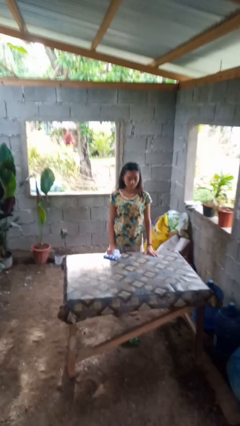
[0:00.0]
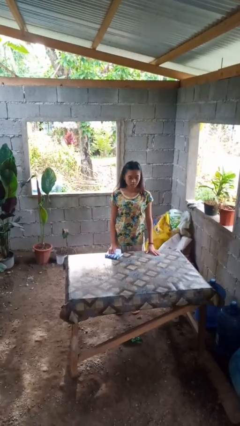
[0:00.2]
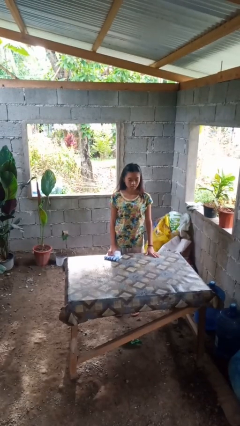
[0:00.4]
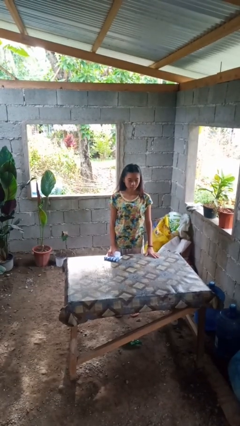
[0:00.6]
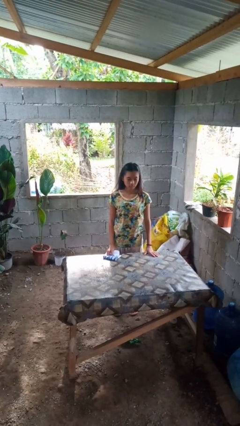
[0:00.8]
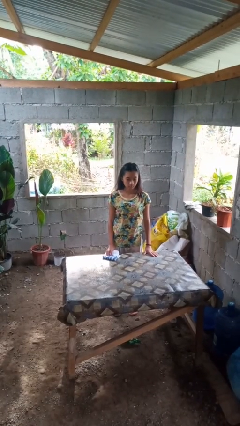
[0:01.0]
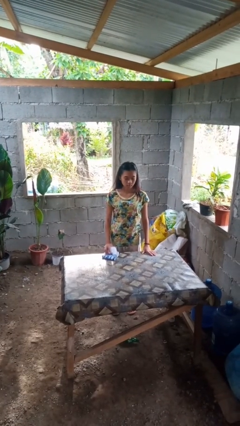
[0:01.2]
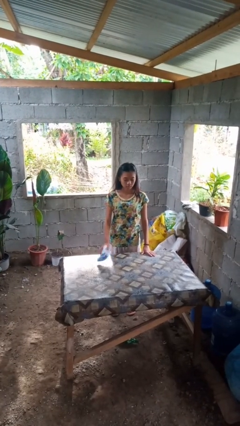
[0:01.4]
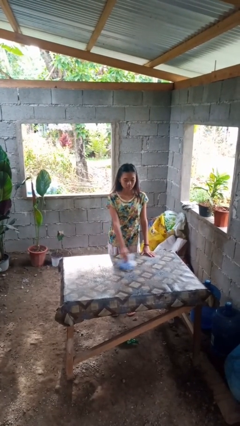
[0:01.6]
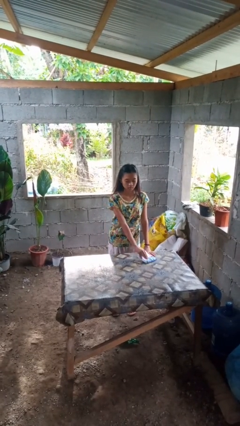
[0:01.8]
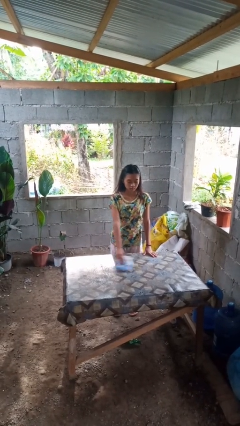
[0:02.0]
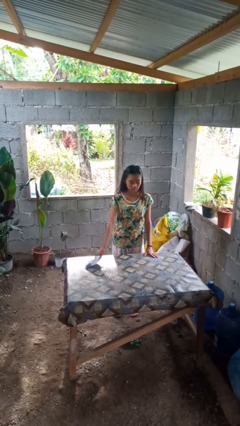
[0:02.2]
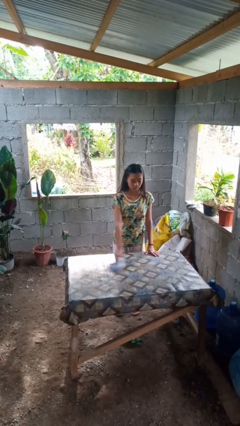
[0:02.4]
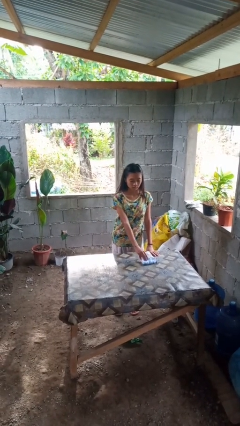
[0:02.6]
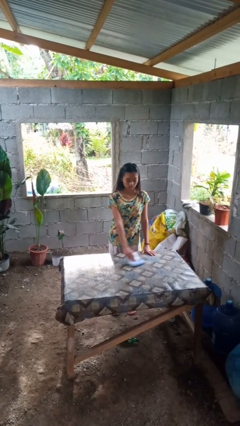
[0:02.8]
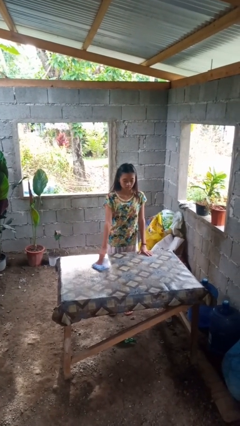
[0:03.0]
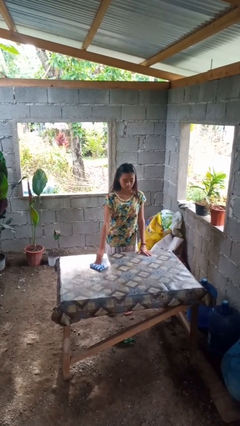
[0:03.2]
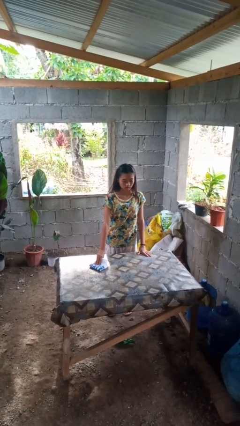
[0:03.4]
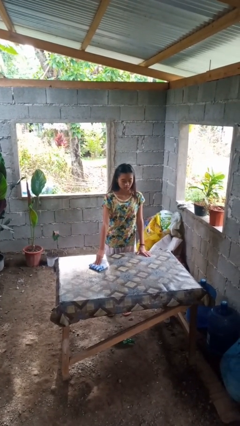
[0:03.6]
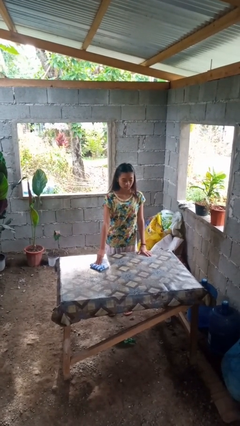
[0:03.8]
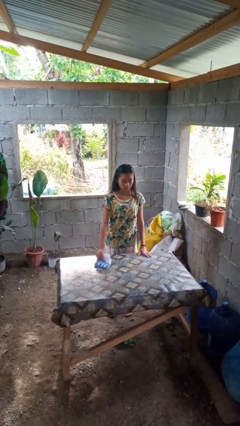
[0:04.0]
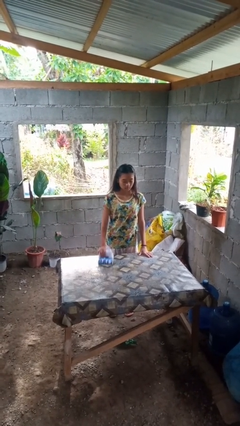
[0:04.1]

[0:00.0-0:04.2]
person cleans table with rag

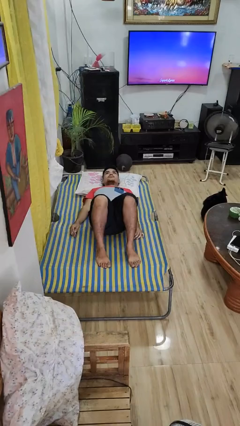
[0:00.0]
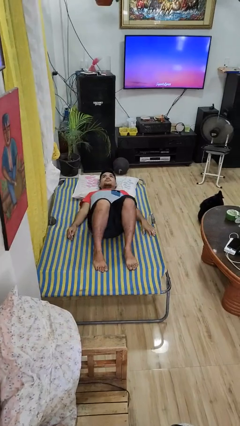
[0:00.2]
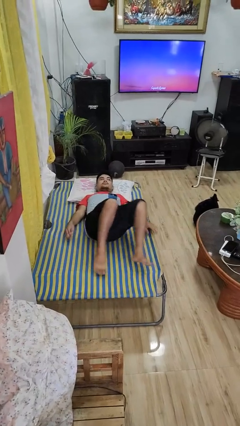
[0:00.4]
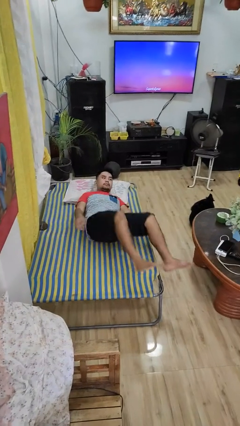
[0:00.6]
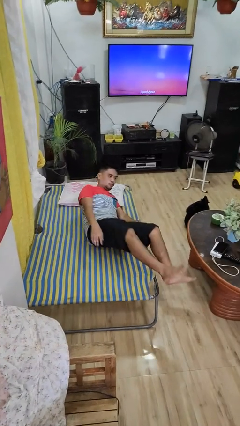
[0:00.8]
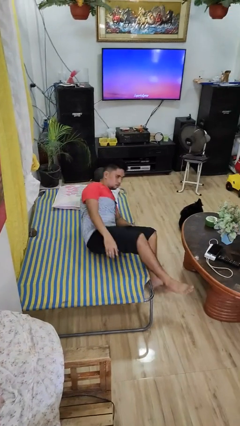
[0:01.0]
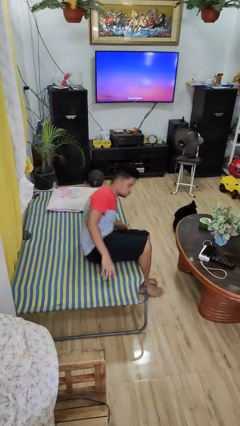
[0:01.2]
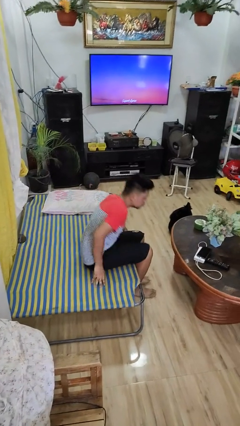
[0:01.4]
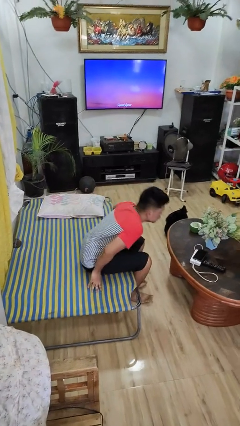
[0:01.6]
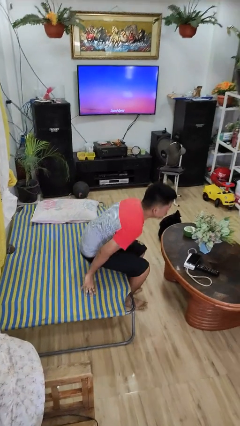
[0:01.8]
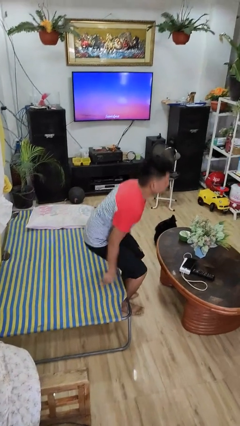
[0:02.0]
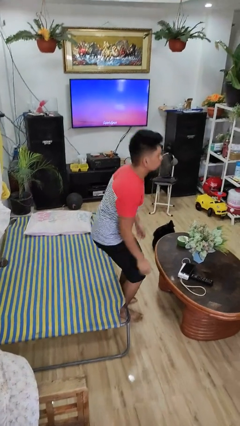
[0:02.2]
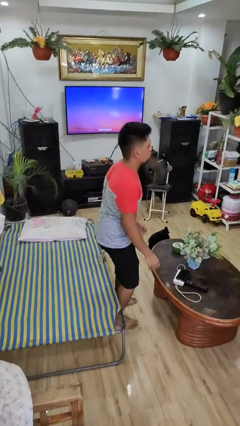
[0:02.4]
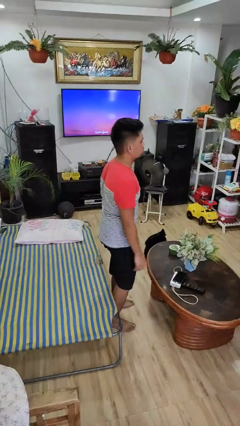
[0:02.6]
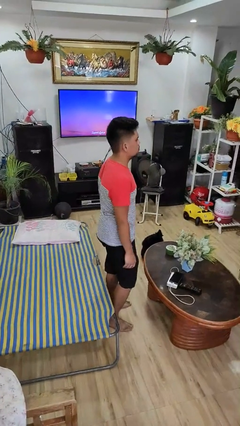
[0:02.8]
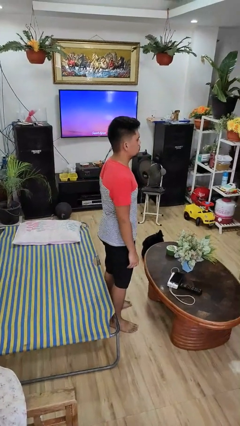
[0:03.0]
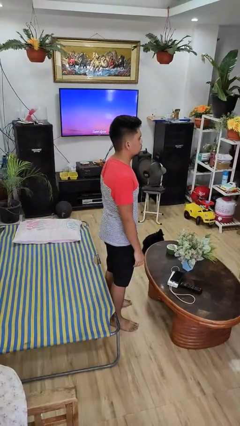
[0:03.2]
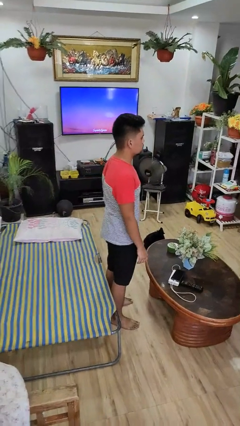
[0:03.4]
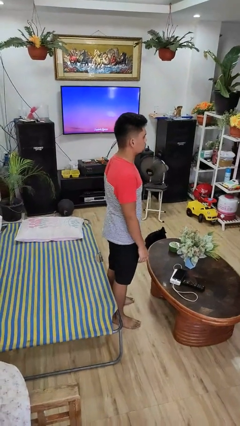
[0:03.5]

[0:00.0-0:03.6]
person stands up

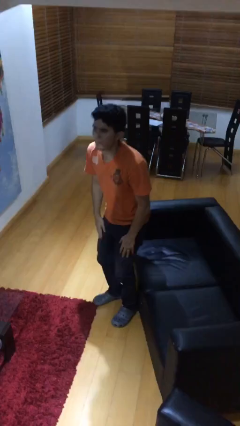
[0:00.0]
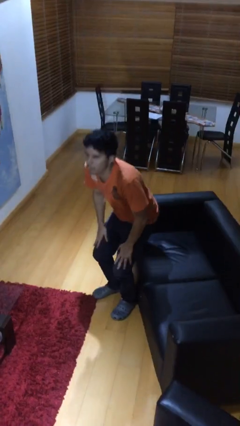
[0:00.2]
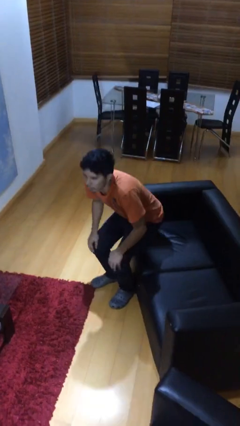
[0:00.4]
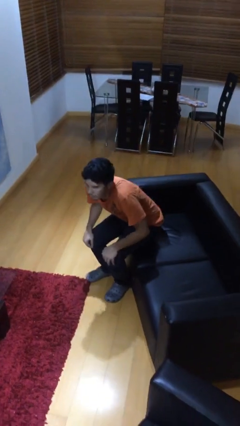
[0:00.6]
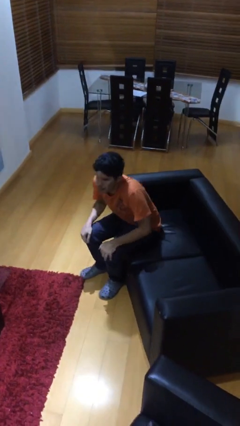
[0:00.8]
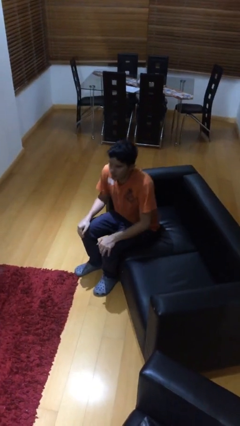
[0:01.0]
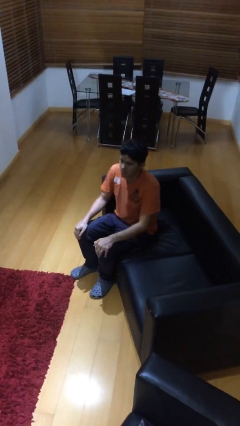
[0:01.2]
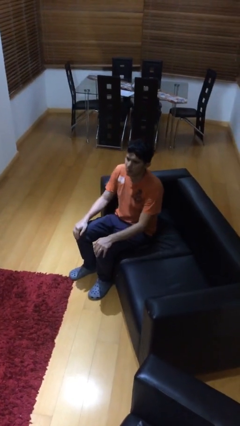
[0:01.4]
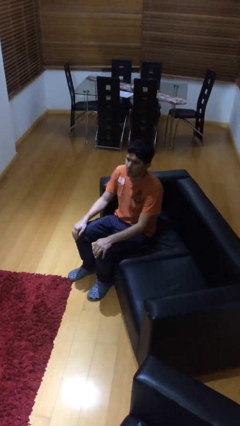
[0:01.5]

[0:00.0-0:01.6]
person sits down

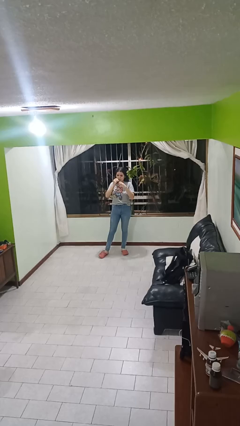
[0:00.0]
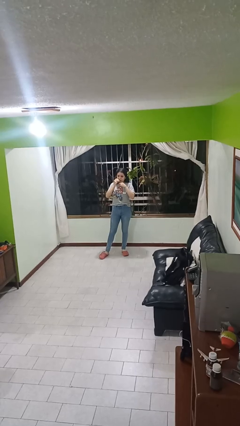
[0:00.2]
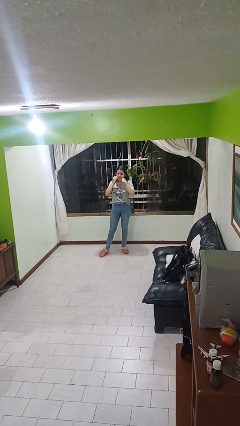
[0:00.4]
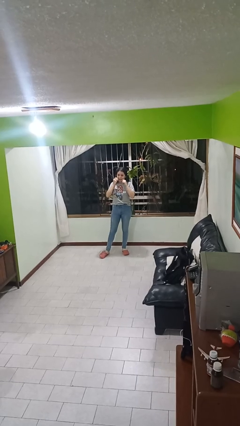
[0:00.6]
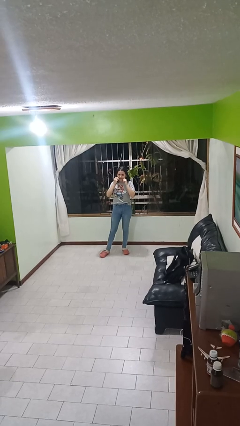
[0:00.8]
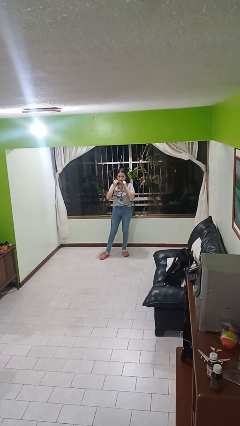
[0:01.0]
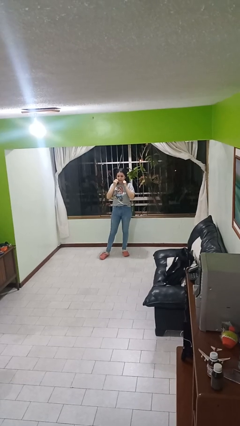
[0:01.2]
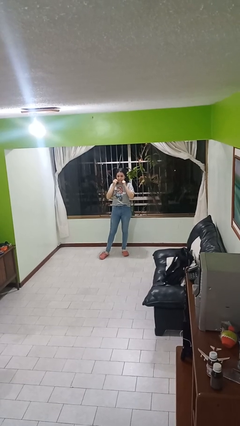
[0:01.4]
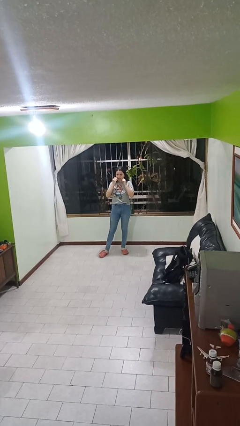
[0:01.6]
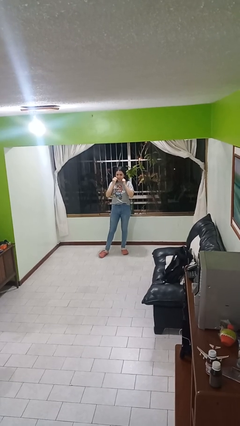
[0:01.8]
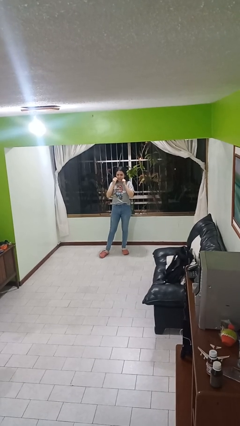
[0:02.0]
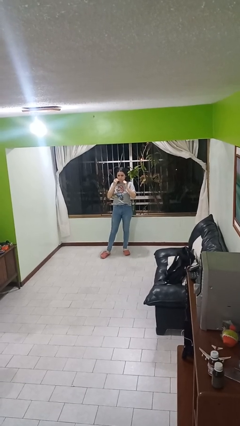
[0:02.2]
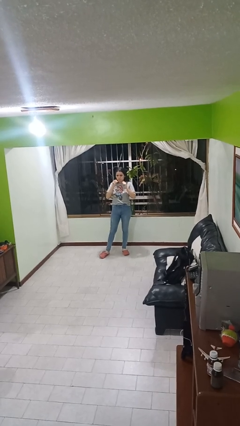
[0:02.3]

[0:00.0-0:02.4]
person flosses

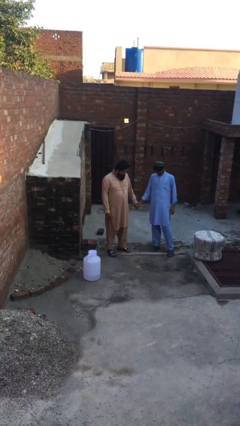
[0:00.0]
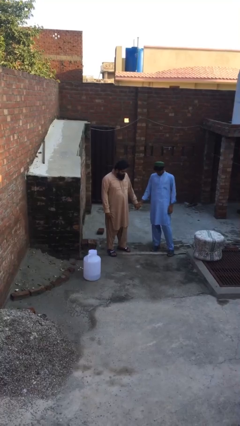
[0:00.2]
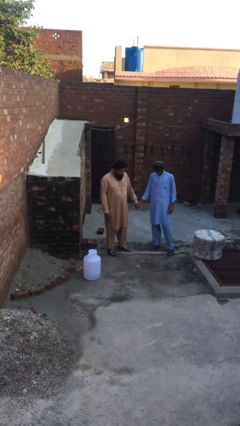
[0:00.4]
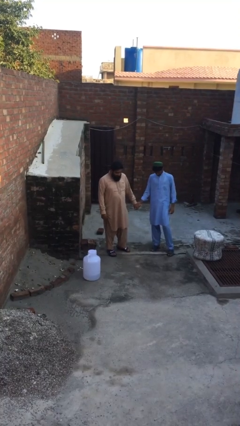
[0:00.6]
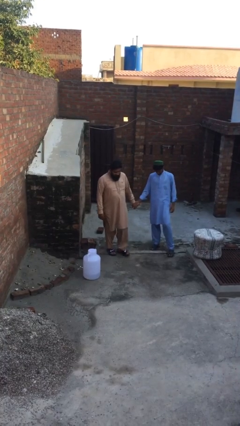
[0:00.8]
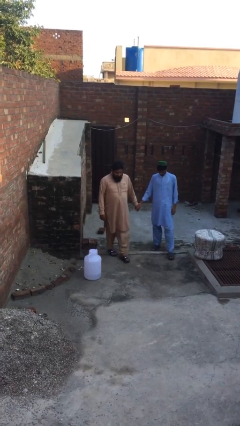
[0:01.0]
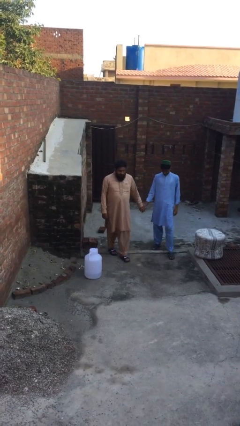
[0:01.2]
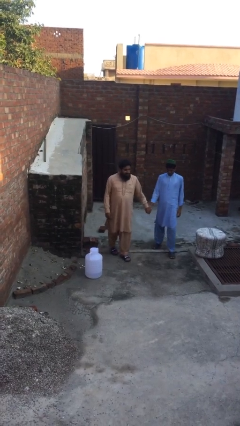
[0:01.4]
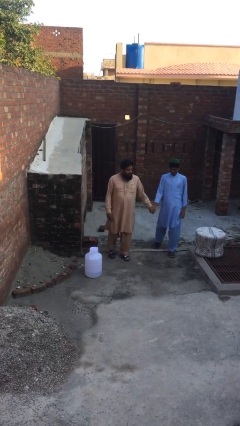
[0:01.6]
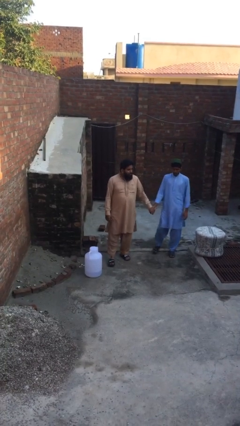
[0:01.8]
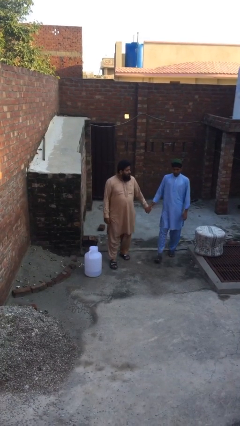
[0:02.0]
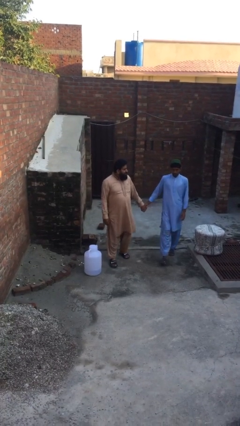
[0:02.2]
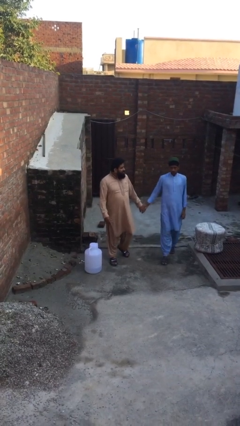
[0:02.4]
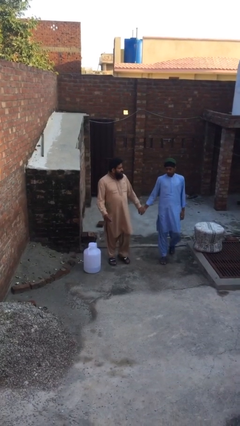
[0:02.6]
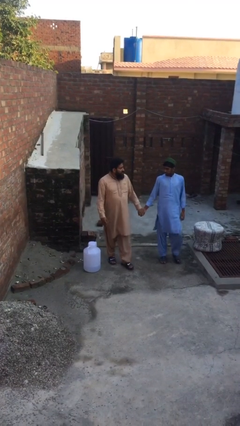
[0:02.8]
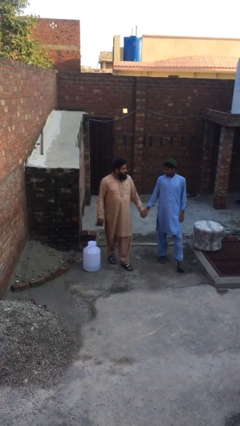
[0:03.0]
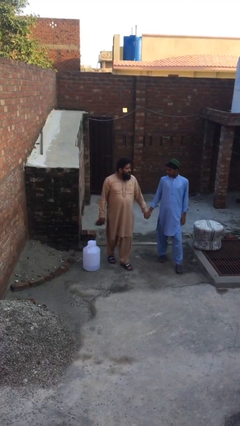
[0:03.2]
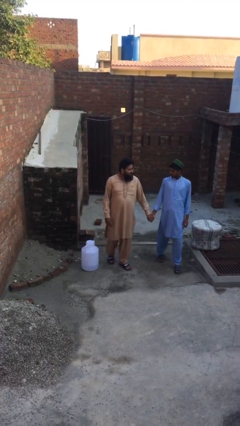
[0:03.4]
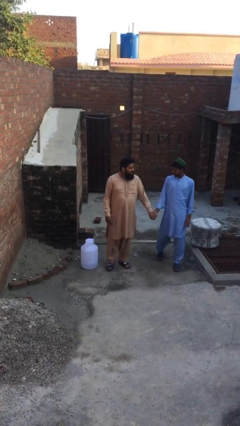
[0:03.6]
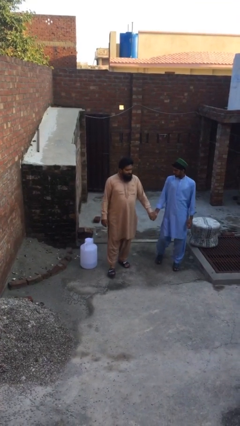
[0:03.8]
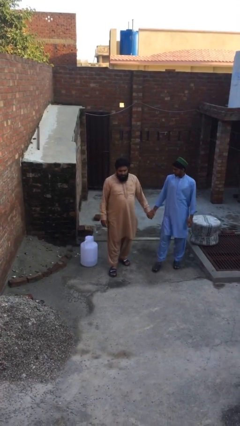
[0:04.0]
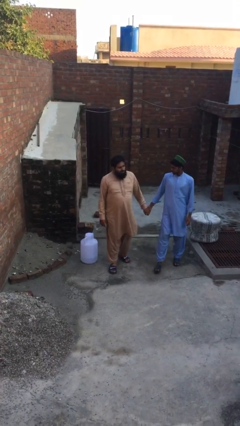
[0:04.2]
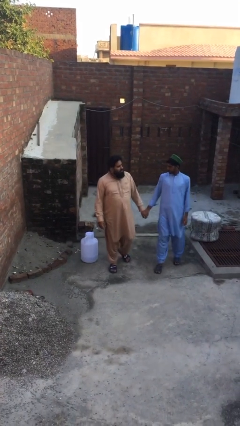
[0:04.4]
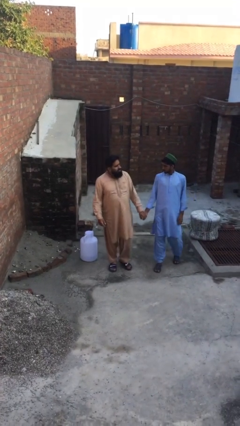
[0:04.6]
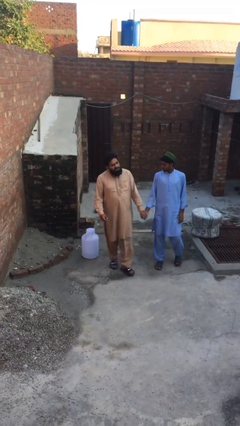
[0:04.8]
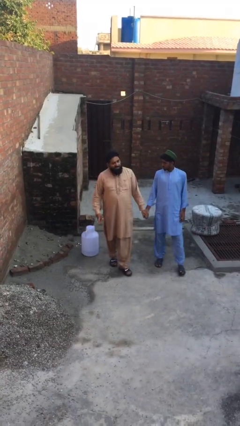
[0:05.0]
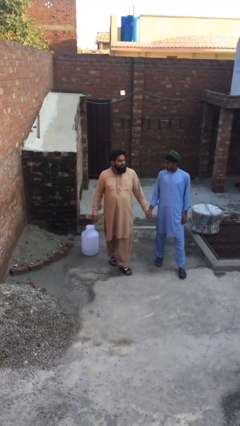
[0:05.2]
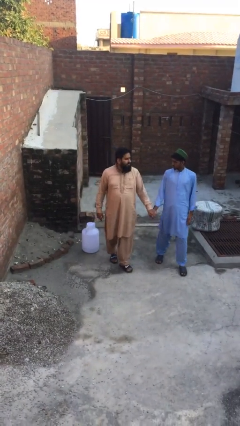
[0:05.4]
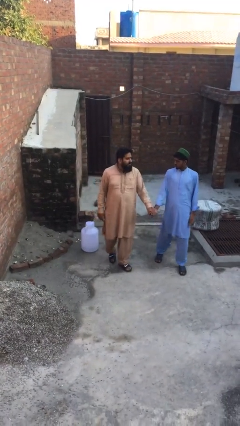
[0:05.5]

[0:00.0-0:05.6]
person holds hand
